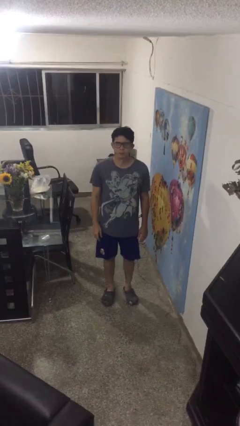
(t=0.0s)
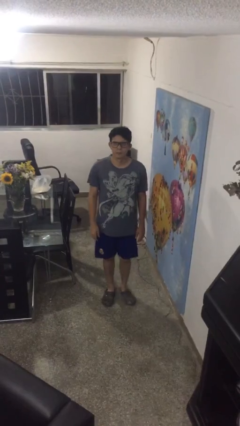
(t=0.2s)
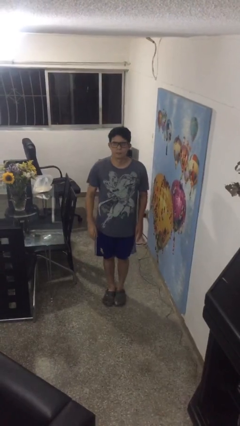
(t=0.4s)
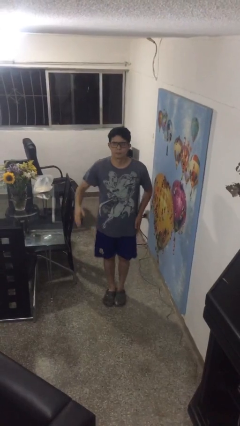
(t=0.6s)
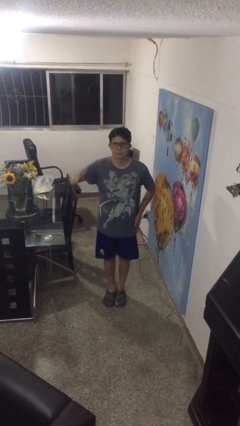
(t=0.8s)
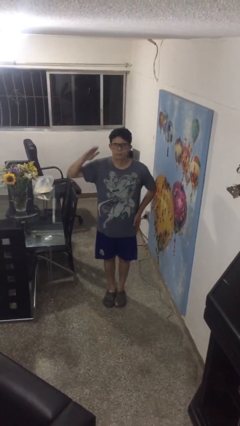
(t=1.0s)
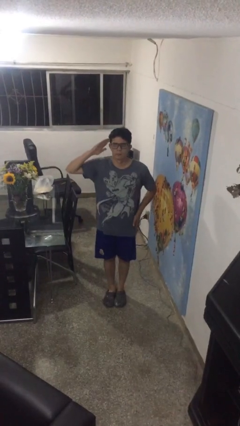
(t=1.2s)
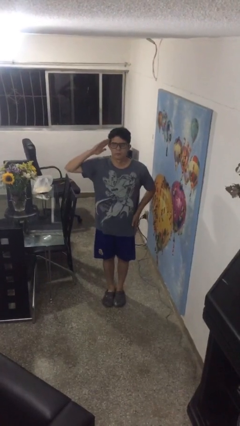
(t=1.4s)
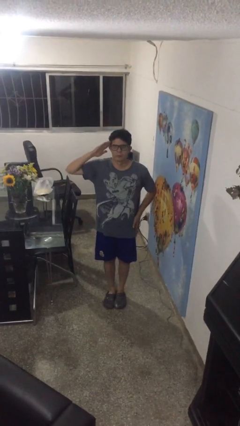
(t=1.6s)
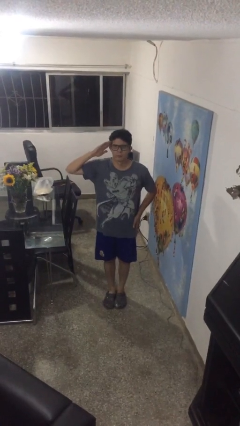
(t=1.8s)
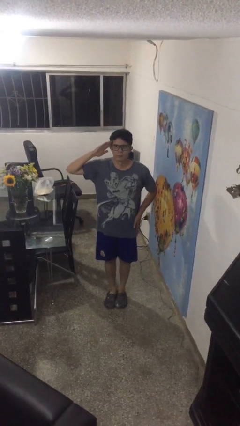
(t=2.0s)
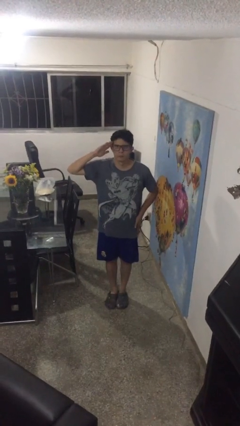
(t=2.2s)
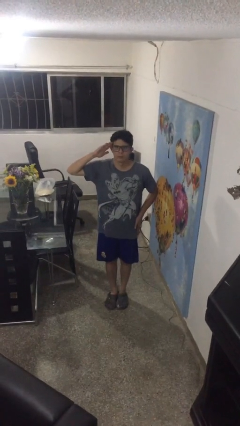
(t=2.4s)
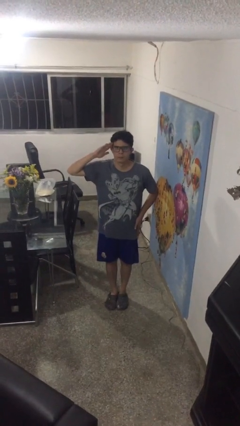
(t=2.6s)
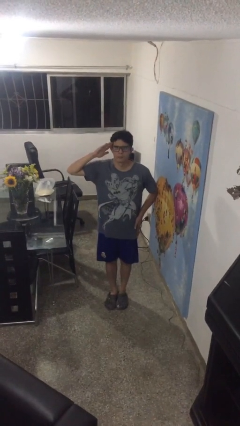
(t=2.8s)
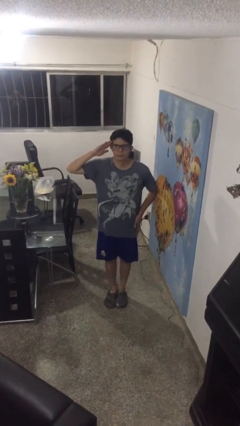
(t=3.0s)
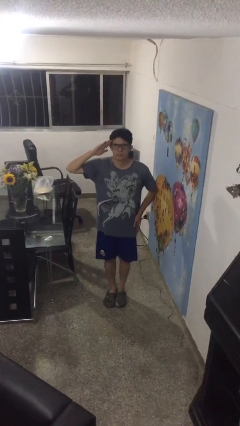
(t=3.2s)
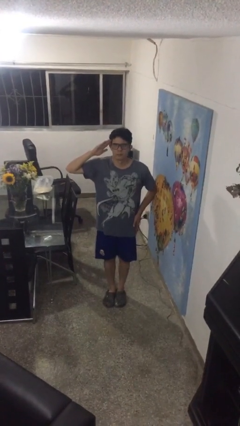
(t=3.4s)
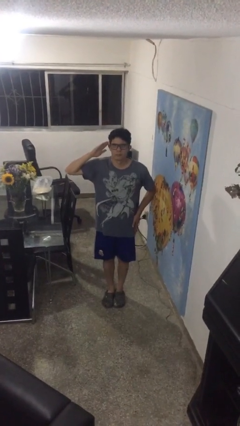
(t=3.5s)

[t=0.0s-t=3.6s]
person salutes

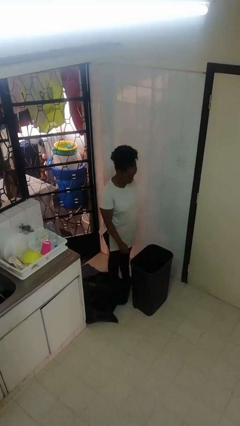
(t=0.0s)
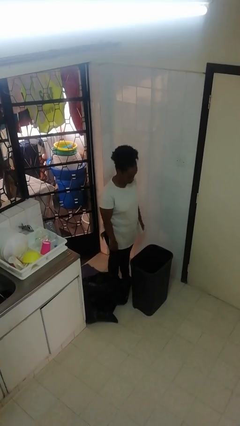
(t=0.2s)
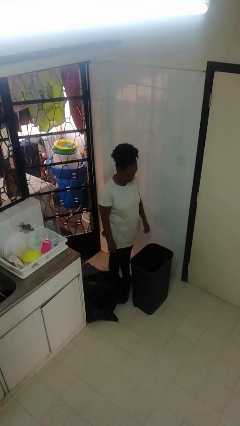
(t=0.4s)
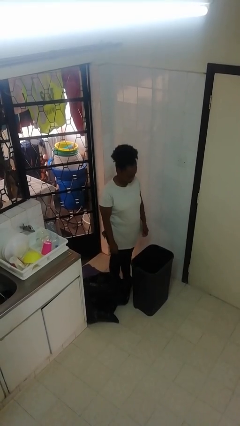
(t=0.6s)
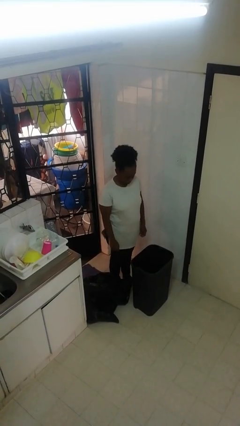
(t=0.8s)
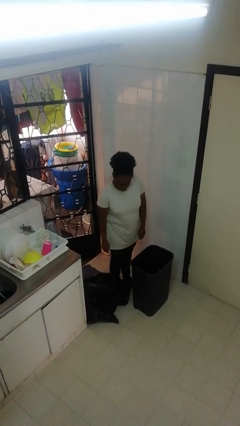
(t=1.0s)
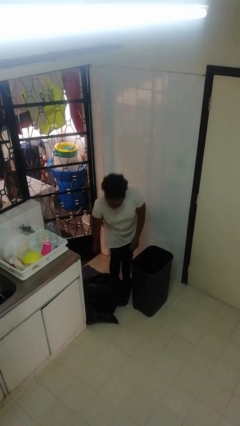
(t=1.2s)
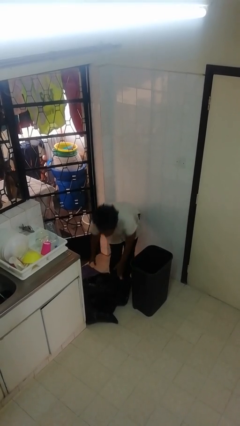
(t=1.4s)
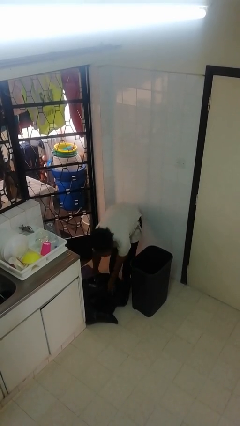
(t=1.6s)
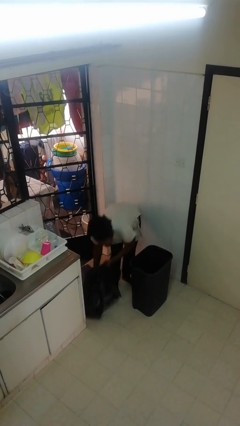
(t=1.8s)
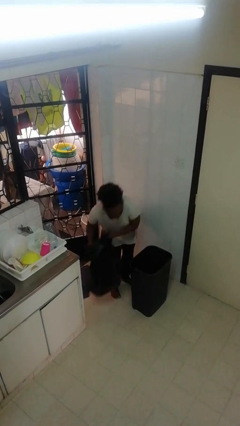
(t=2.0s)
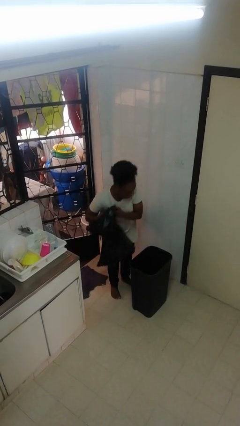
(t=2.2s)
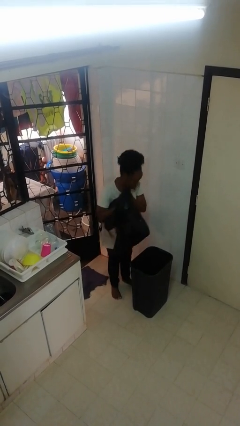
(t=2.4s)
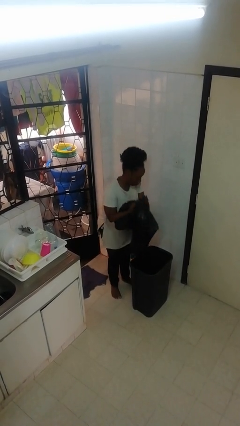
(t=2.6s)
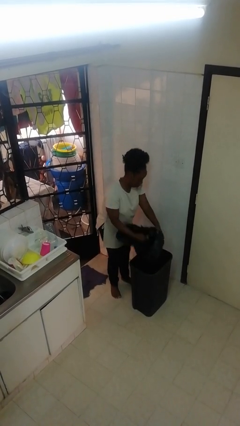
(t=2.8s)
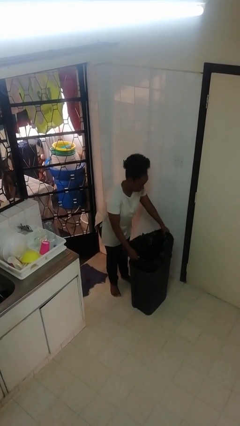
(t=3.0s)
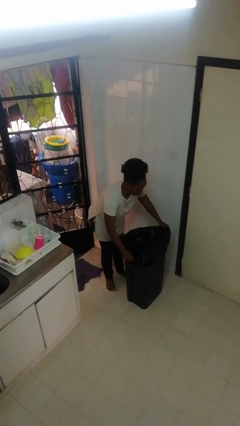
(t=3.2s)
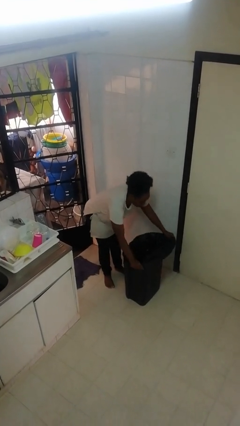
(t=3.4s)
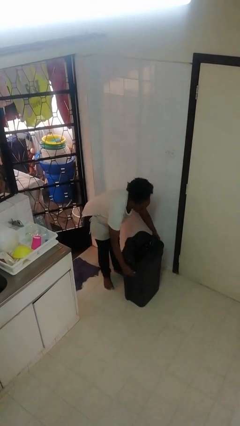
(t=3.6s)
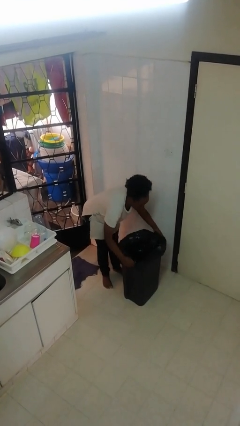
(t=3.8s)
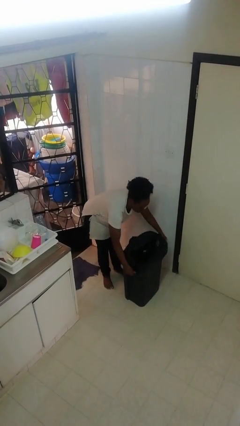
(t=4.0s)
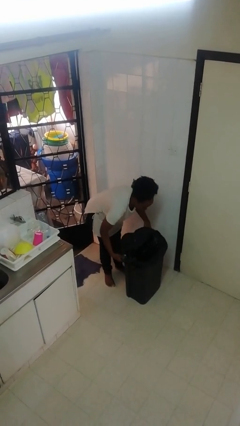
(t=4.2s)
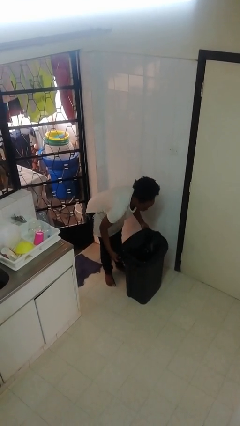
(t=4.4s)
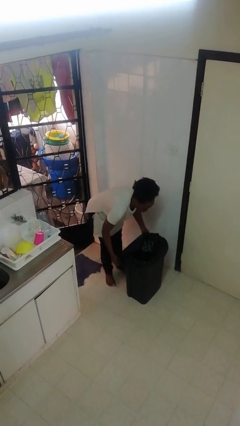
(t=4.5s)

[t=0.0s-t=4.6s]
person inserts trashbag into trashcan

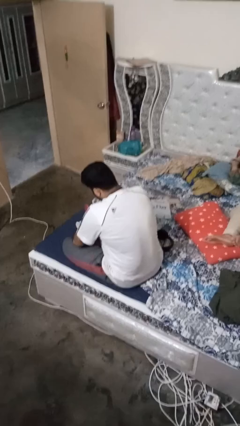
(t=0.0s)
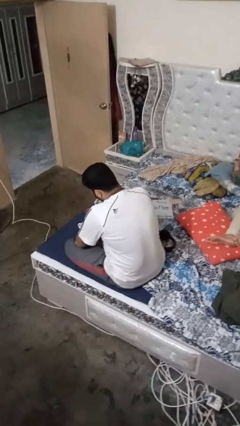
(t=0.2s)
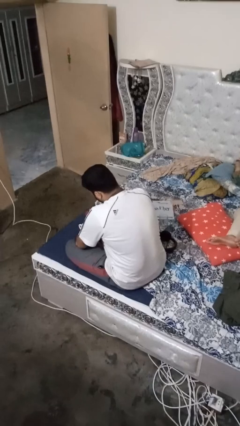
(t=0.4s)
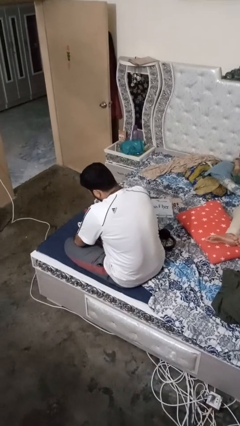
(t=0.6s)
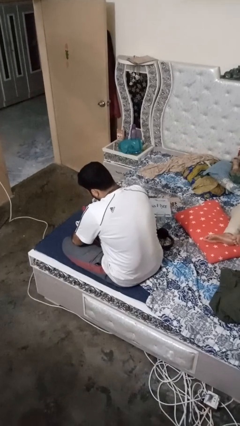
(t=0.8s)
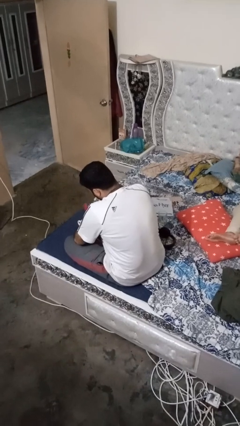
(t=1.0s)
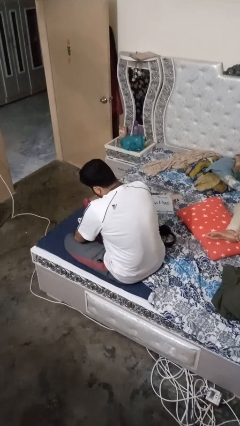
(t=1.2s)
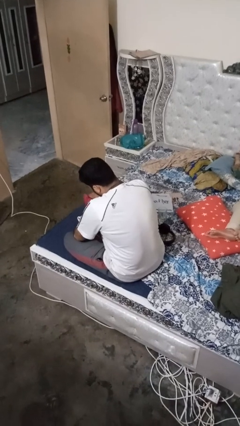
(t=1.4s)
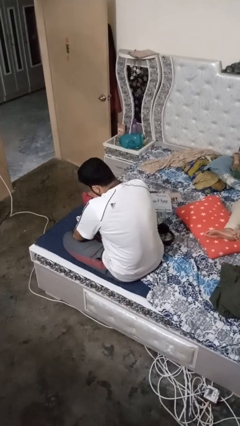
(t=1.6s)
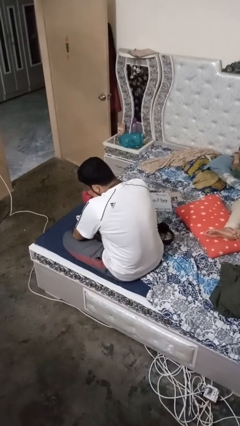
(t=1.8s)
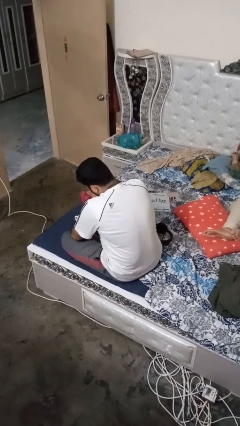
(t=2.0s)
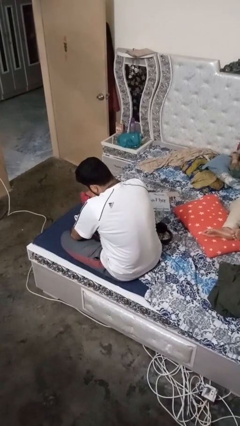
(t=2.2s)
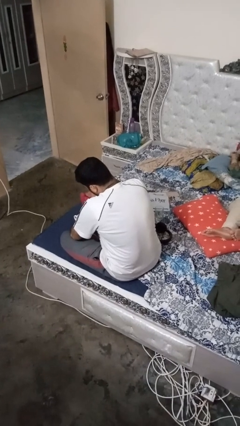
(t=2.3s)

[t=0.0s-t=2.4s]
person pours liquid into cup

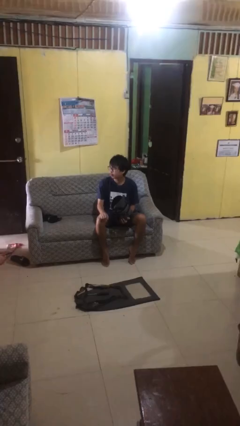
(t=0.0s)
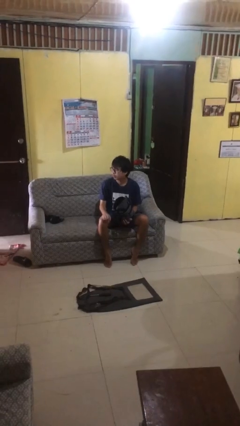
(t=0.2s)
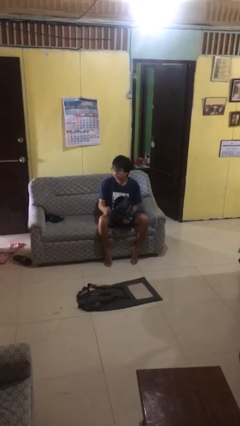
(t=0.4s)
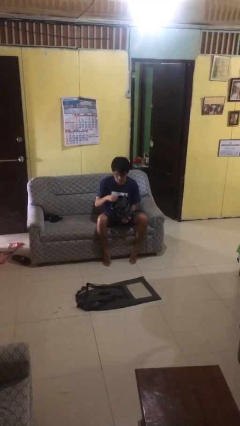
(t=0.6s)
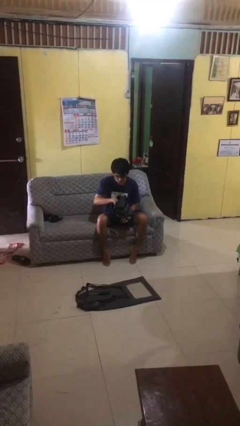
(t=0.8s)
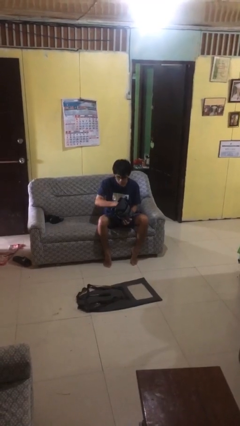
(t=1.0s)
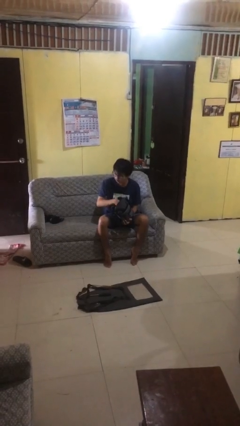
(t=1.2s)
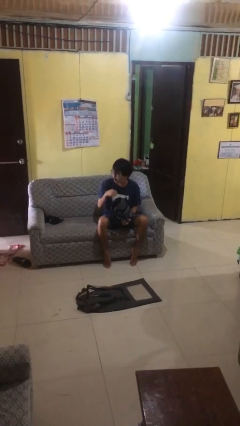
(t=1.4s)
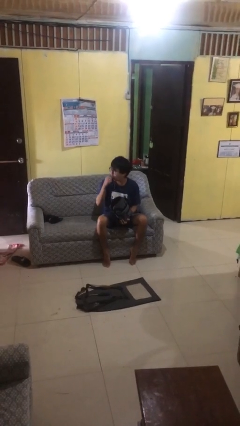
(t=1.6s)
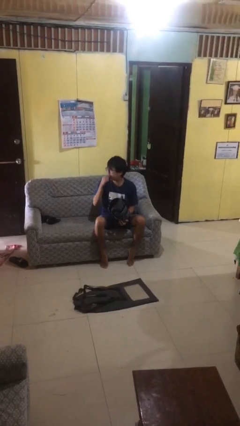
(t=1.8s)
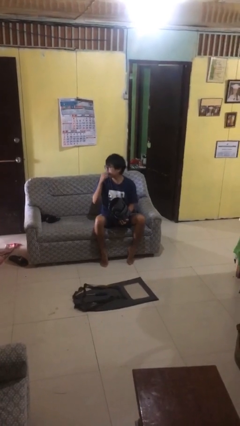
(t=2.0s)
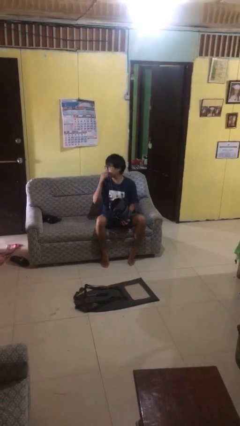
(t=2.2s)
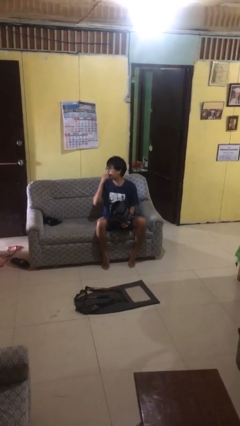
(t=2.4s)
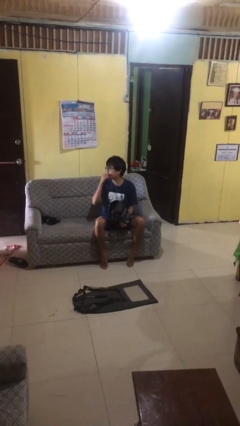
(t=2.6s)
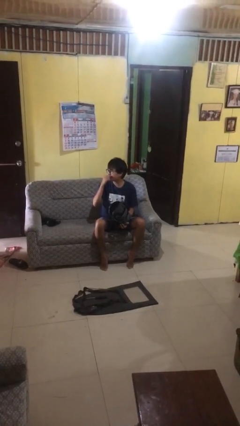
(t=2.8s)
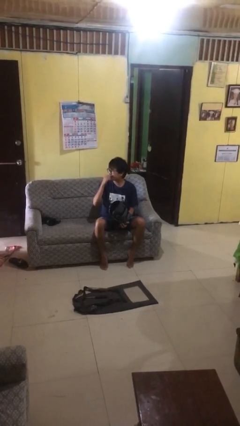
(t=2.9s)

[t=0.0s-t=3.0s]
person eats snack from bag

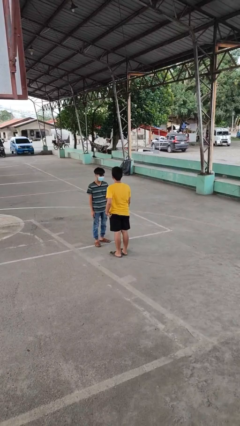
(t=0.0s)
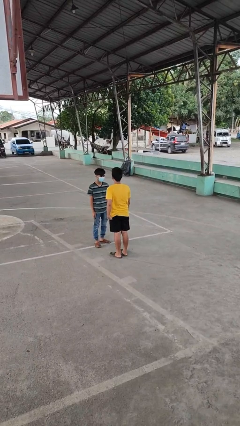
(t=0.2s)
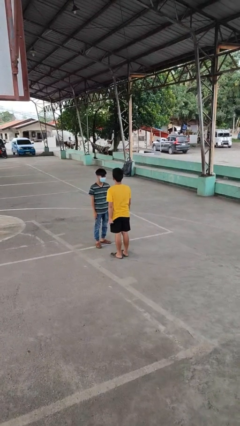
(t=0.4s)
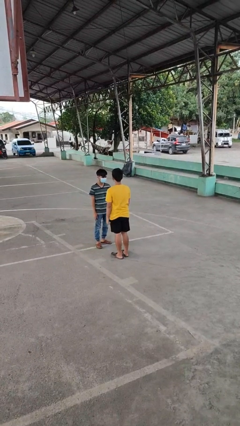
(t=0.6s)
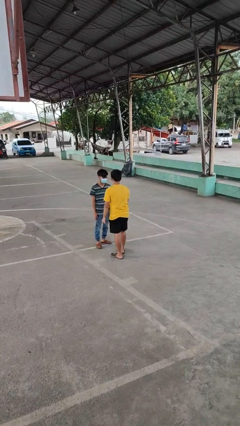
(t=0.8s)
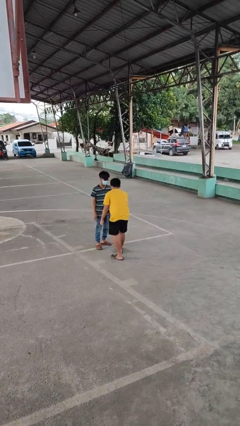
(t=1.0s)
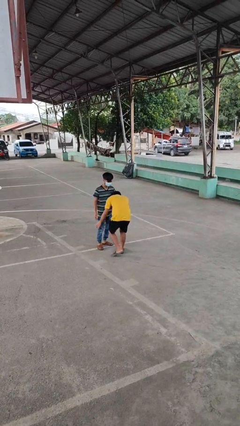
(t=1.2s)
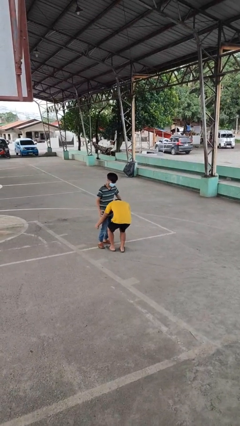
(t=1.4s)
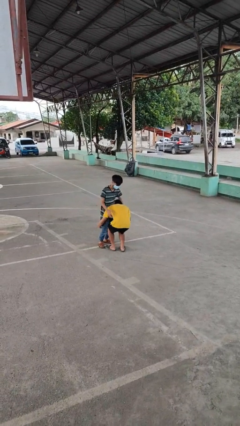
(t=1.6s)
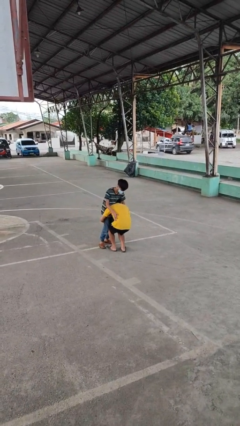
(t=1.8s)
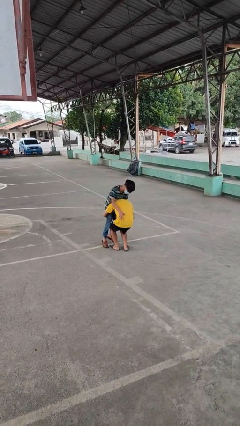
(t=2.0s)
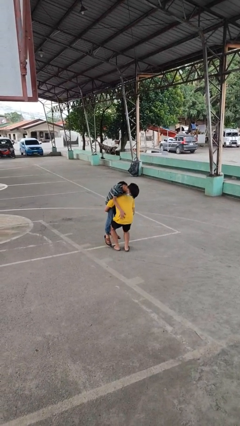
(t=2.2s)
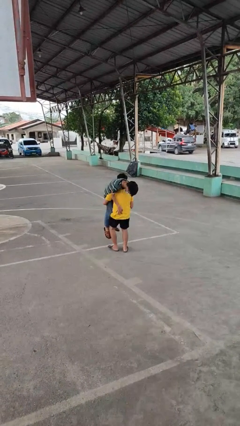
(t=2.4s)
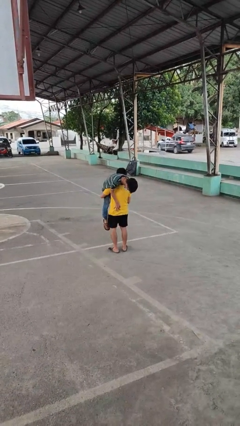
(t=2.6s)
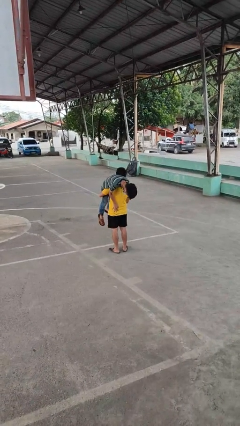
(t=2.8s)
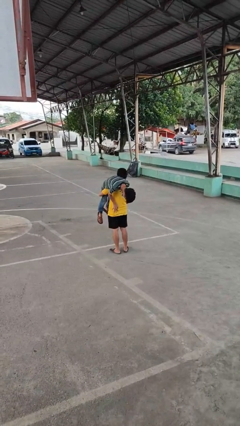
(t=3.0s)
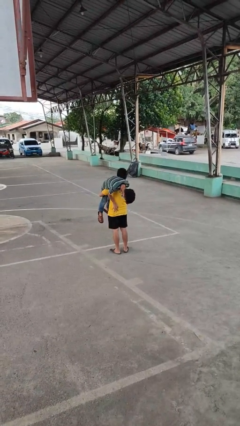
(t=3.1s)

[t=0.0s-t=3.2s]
person carries person over shoulder

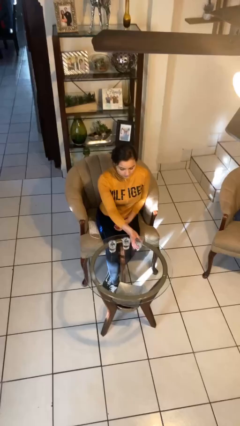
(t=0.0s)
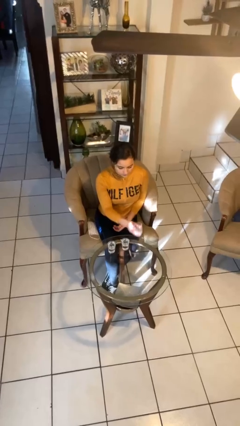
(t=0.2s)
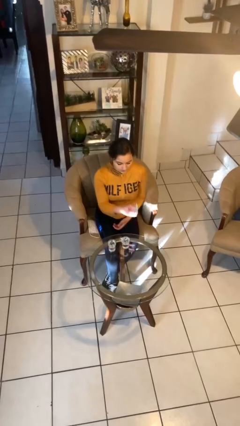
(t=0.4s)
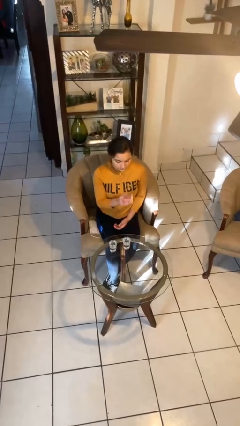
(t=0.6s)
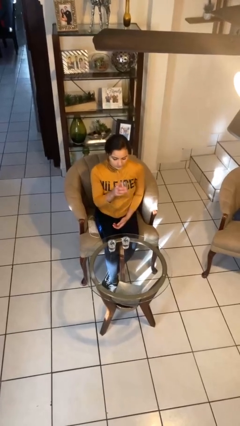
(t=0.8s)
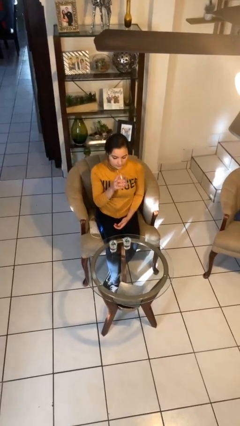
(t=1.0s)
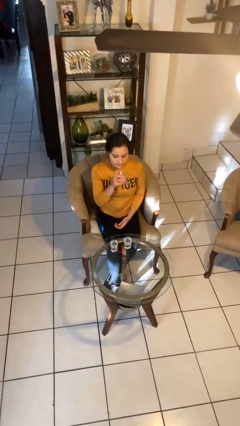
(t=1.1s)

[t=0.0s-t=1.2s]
person picks up object from table
